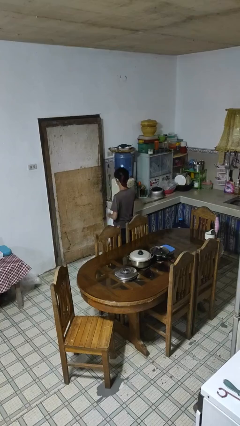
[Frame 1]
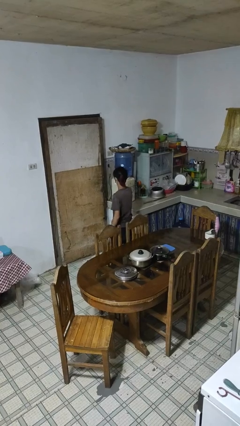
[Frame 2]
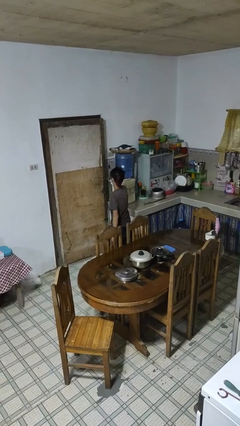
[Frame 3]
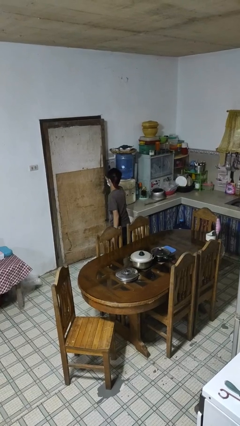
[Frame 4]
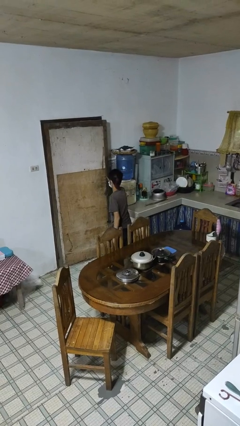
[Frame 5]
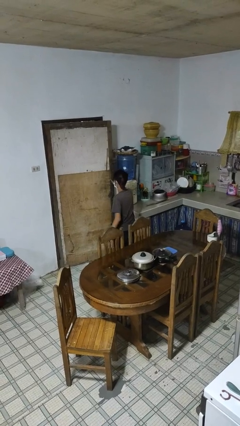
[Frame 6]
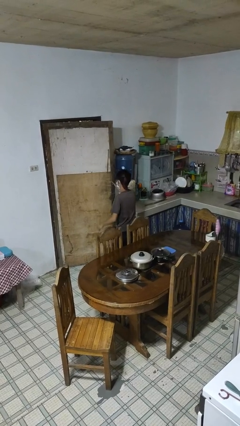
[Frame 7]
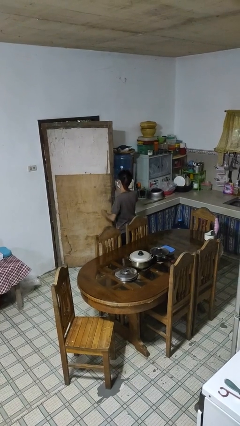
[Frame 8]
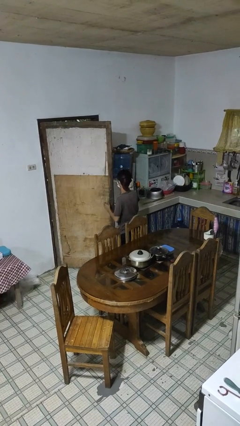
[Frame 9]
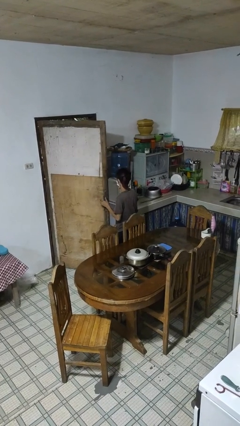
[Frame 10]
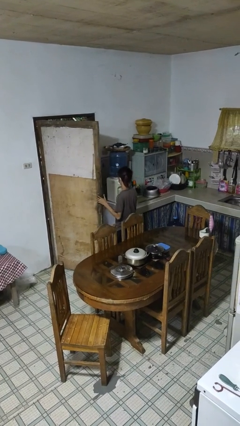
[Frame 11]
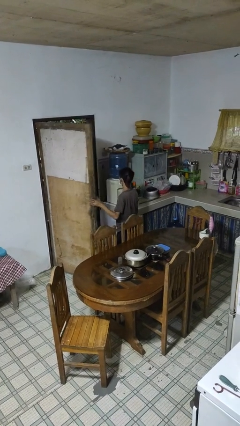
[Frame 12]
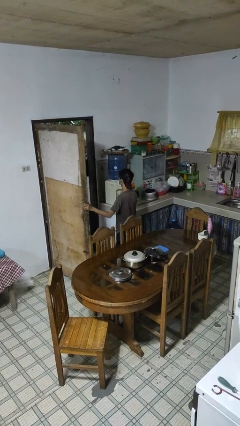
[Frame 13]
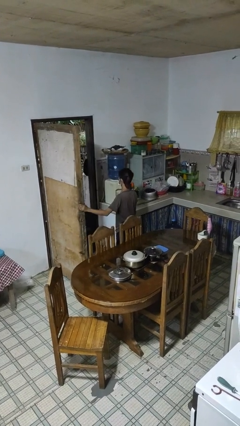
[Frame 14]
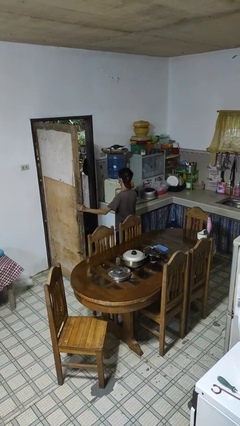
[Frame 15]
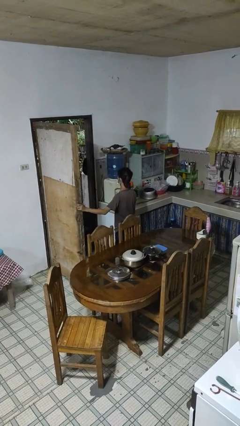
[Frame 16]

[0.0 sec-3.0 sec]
person opens facility door

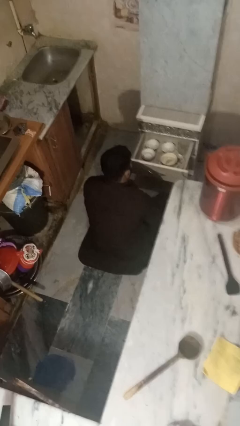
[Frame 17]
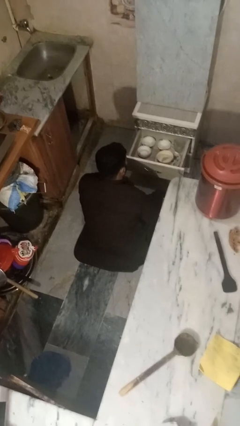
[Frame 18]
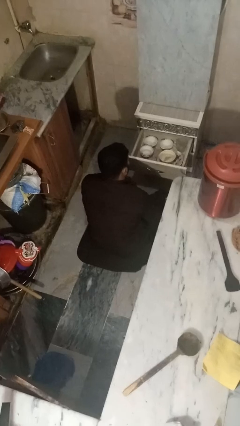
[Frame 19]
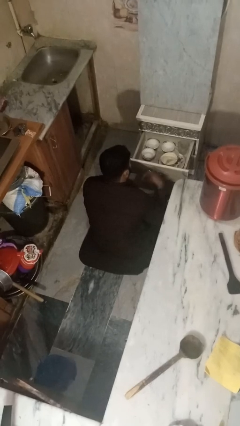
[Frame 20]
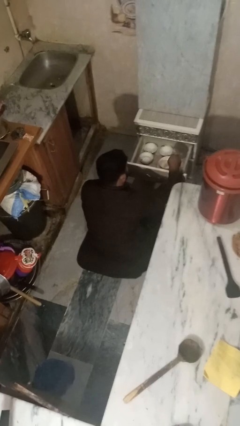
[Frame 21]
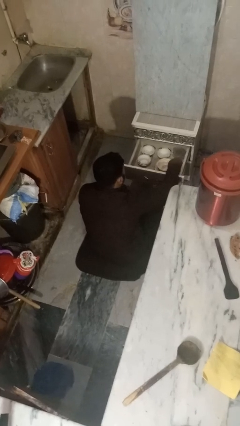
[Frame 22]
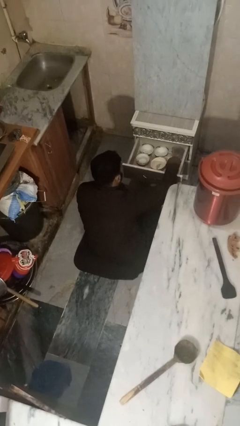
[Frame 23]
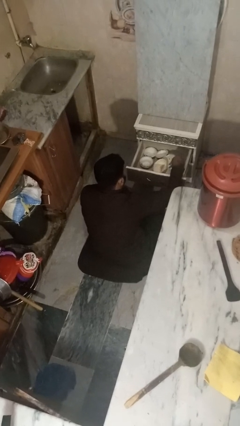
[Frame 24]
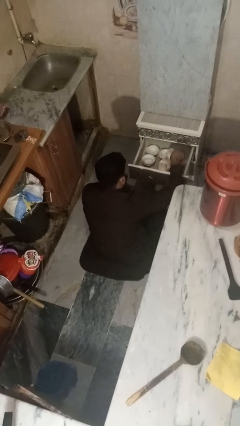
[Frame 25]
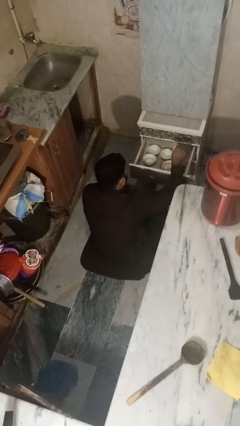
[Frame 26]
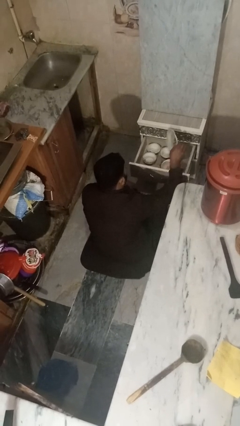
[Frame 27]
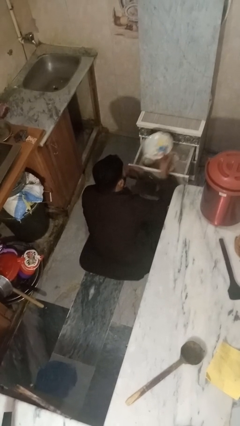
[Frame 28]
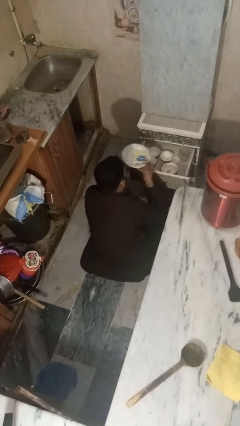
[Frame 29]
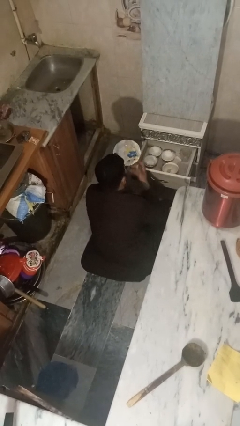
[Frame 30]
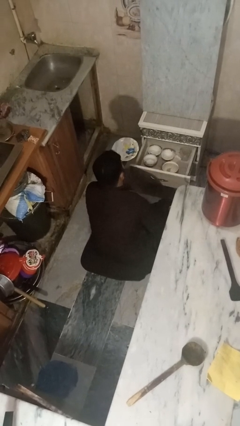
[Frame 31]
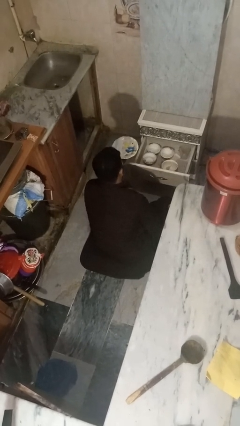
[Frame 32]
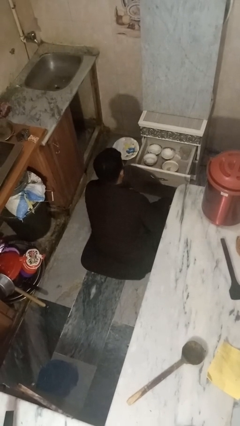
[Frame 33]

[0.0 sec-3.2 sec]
person takes object from kitchen drawer

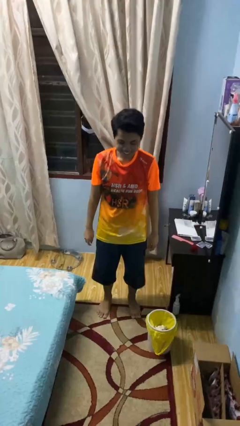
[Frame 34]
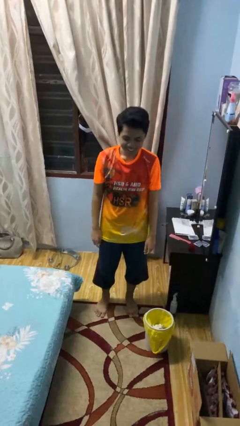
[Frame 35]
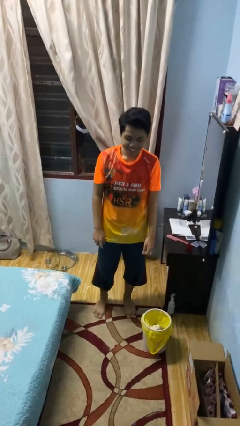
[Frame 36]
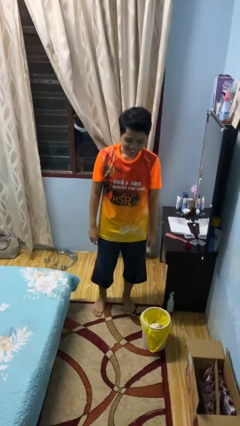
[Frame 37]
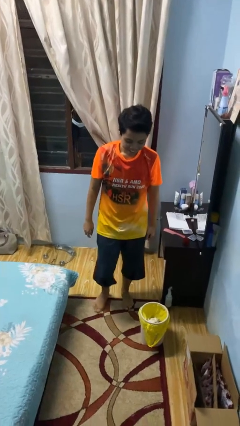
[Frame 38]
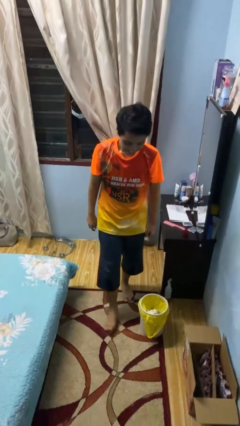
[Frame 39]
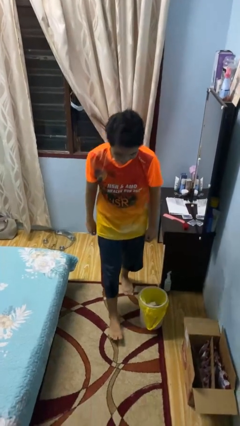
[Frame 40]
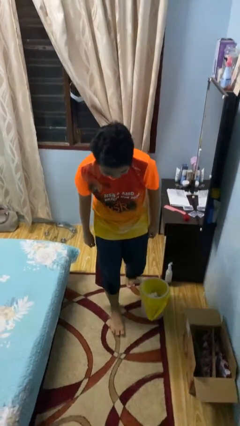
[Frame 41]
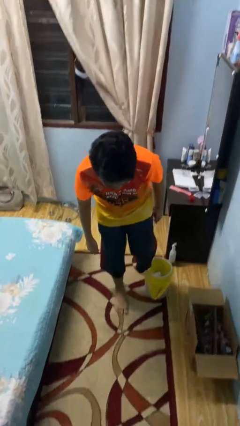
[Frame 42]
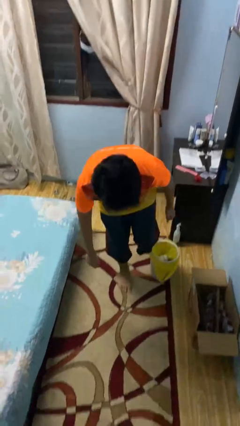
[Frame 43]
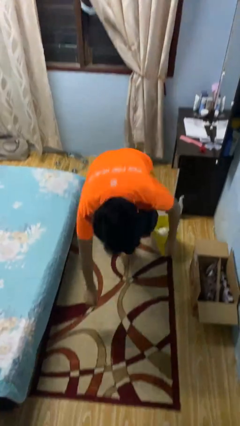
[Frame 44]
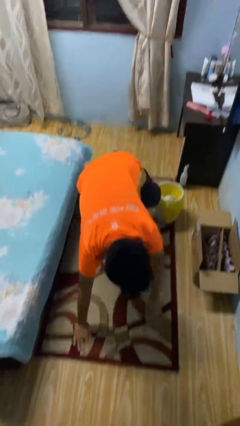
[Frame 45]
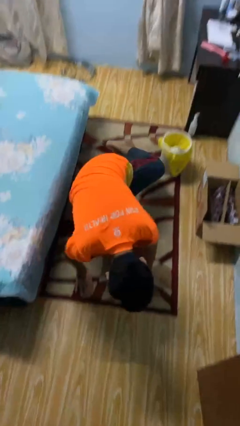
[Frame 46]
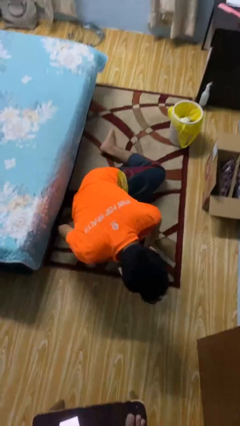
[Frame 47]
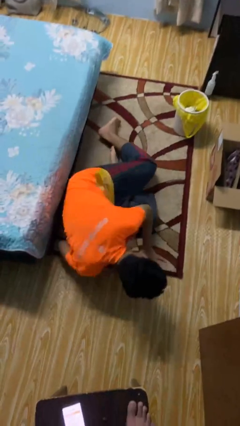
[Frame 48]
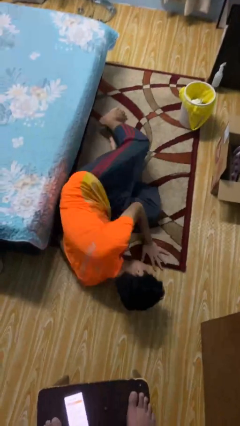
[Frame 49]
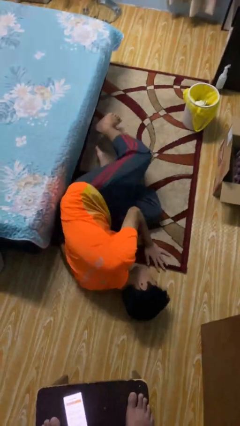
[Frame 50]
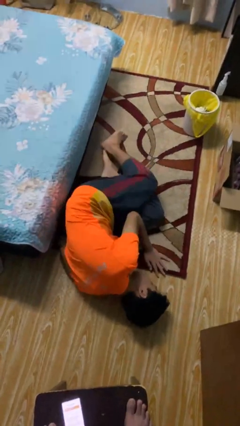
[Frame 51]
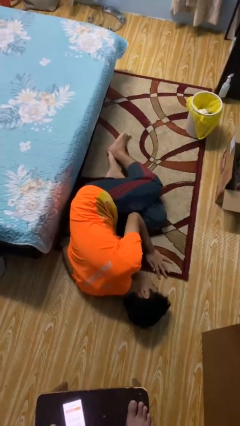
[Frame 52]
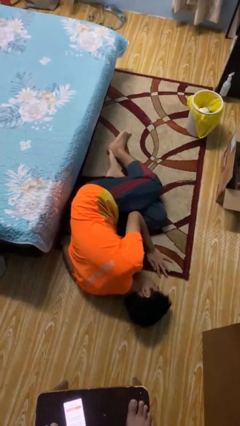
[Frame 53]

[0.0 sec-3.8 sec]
person trips on object on floor

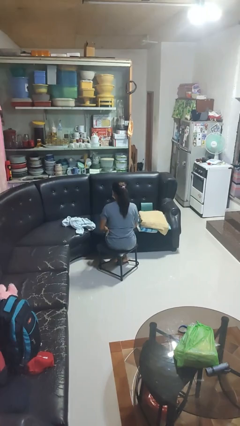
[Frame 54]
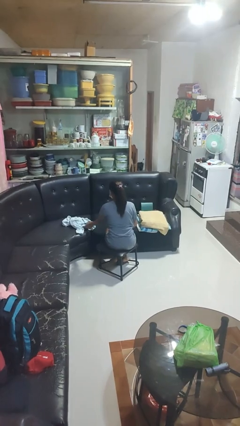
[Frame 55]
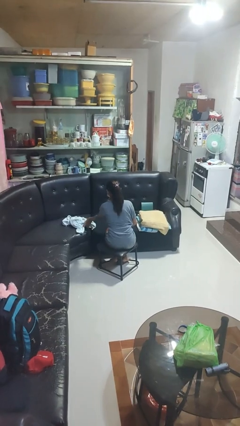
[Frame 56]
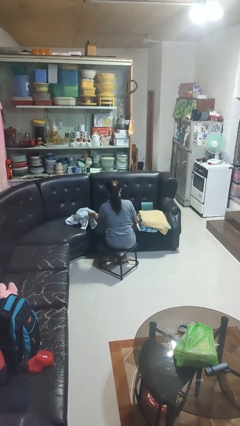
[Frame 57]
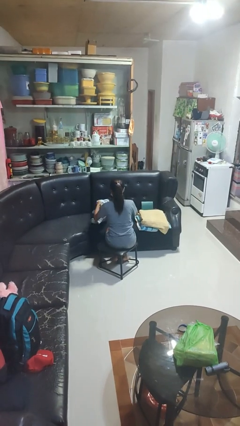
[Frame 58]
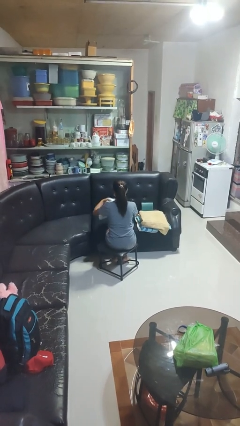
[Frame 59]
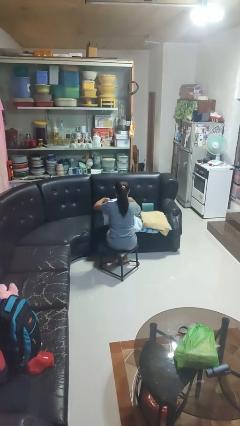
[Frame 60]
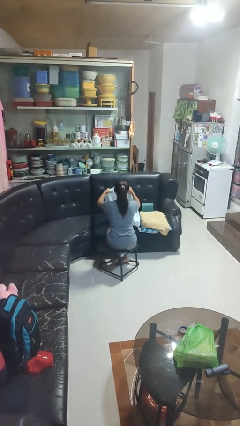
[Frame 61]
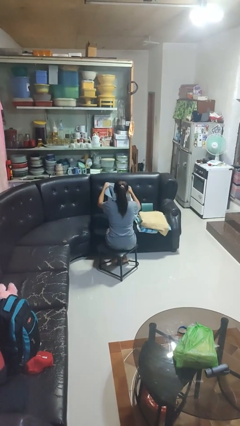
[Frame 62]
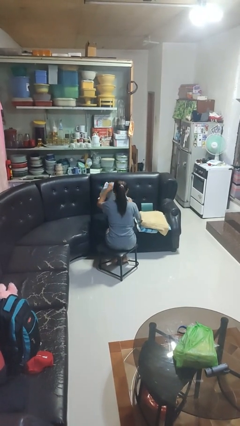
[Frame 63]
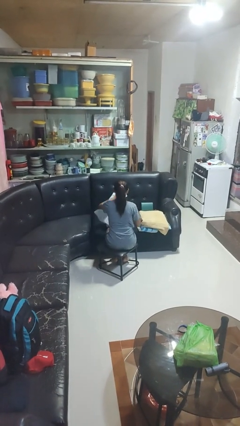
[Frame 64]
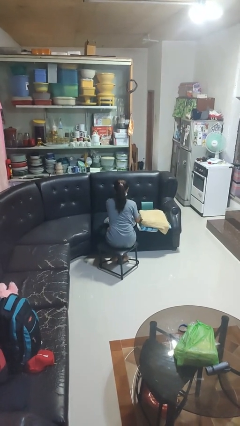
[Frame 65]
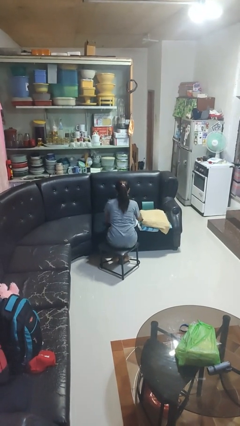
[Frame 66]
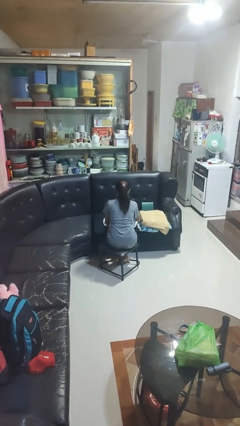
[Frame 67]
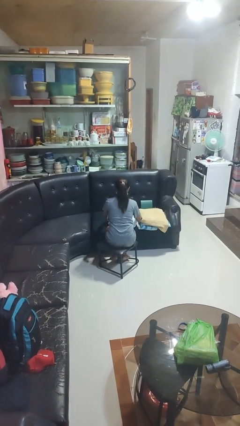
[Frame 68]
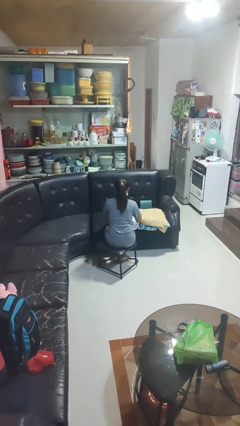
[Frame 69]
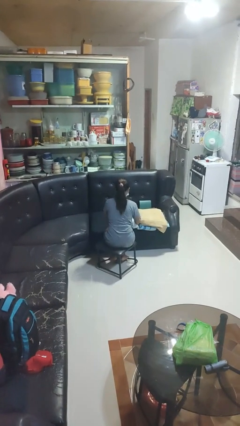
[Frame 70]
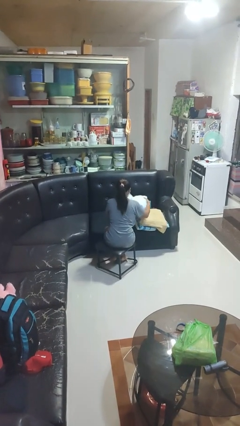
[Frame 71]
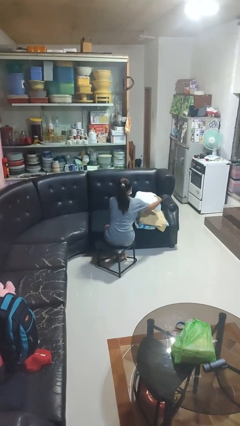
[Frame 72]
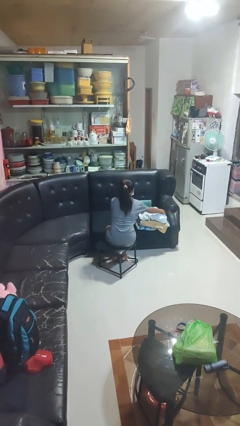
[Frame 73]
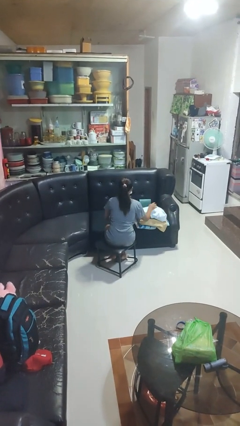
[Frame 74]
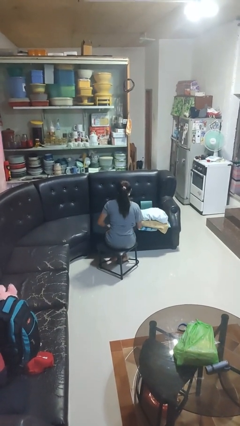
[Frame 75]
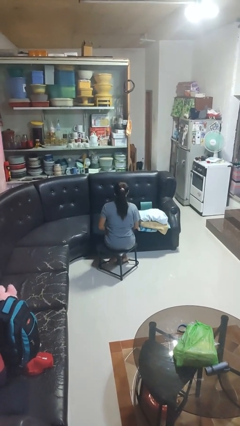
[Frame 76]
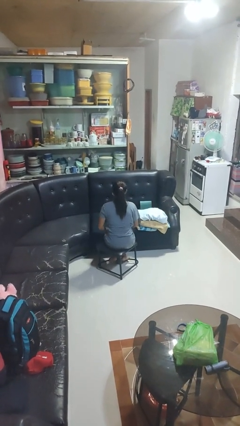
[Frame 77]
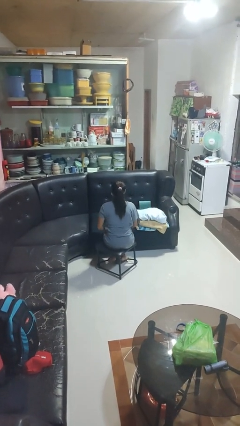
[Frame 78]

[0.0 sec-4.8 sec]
person folds towel

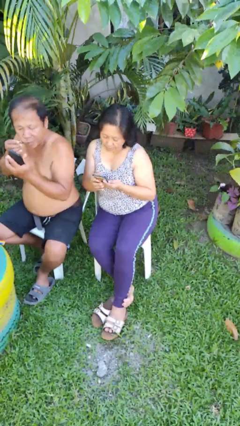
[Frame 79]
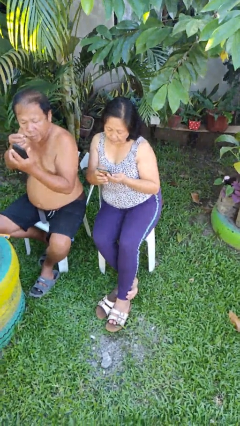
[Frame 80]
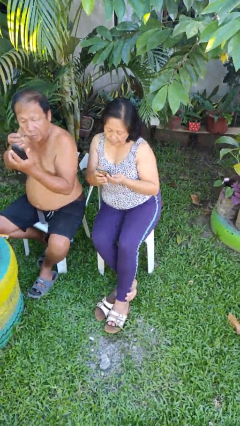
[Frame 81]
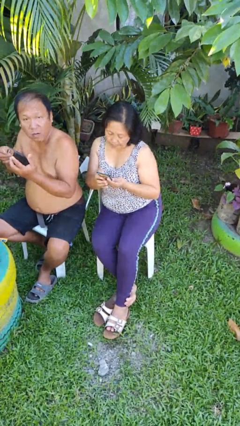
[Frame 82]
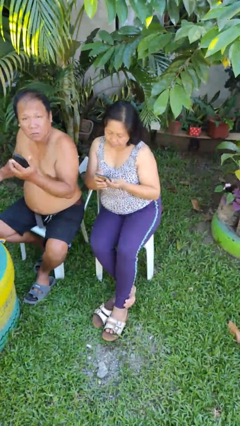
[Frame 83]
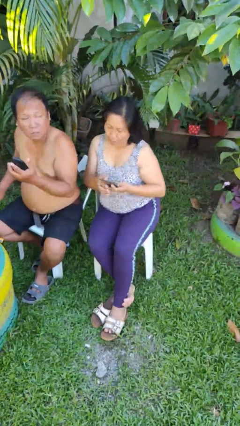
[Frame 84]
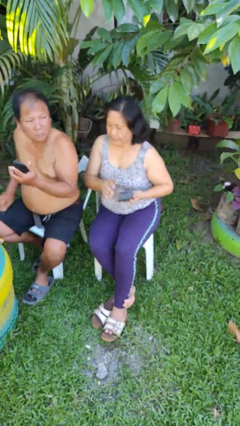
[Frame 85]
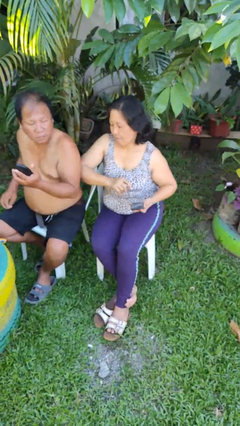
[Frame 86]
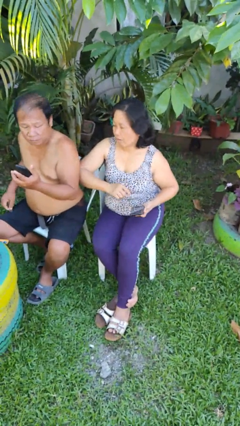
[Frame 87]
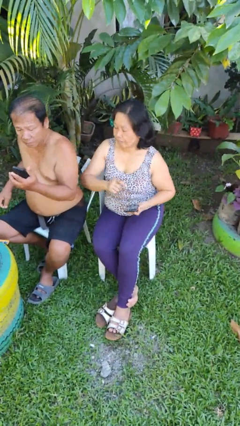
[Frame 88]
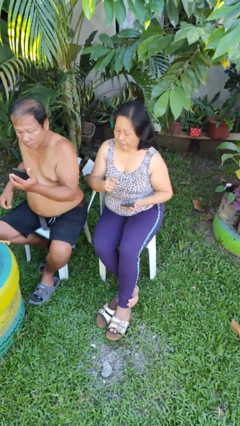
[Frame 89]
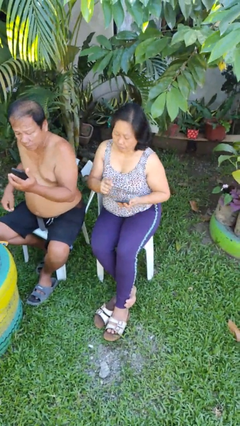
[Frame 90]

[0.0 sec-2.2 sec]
person nudges person with elbow

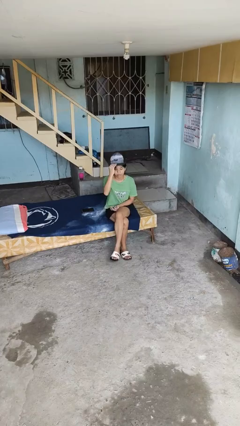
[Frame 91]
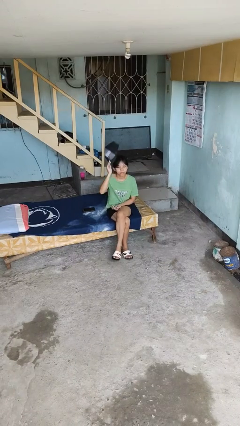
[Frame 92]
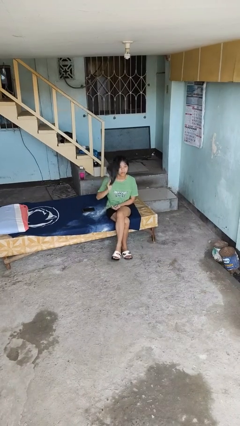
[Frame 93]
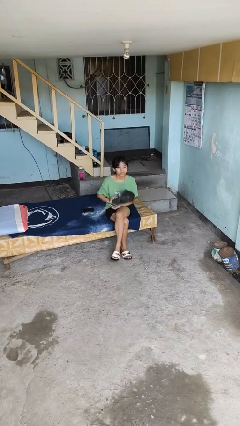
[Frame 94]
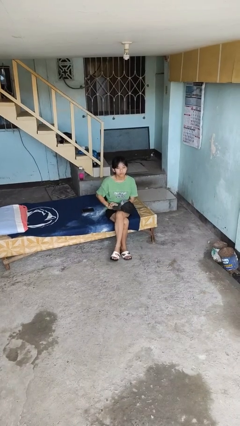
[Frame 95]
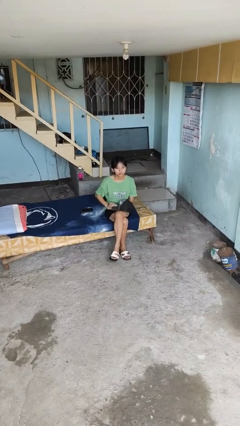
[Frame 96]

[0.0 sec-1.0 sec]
person takes off hat
